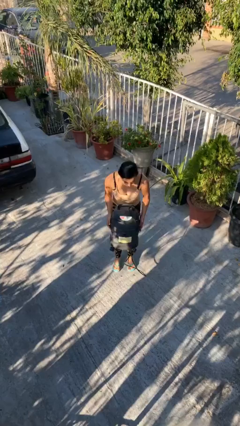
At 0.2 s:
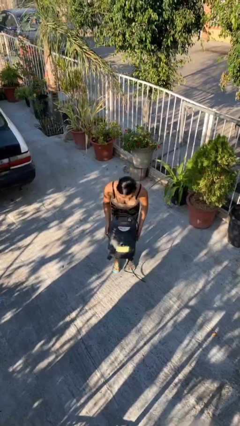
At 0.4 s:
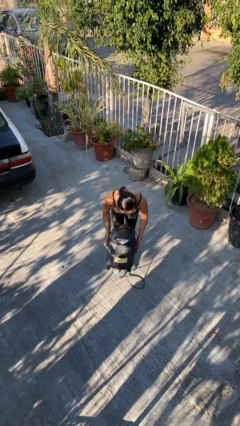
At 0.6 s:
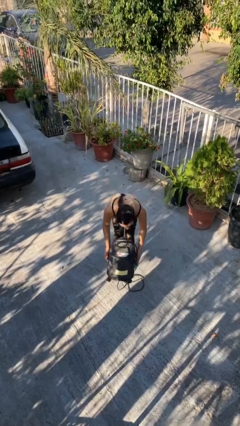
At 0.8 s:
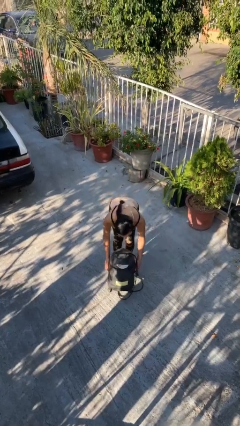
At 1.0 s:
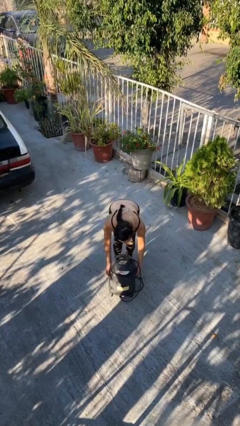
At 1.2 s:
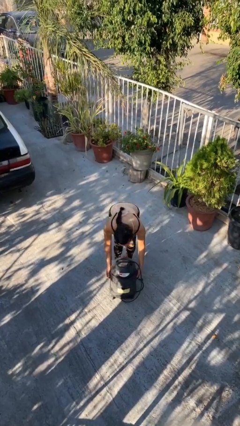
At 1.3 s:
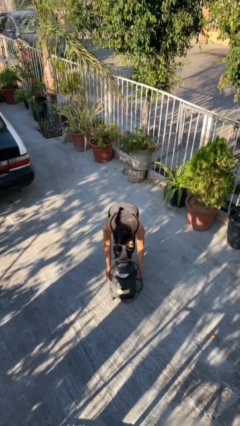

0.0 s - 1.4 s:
person puts down object on floor

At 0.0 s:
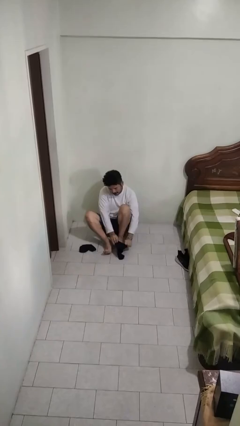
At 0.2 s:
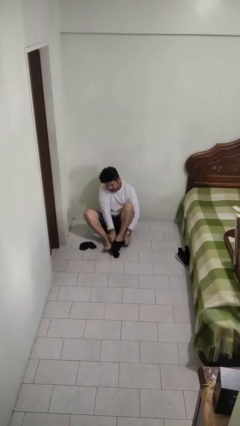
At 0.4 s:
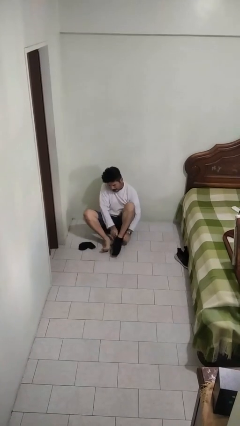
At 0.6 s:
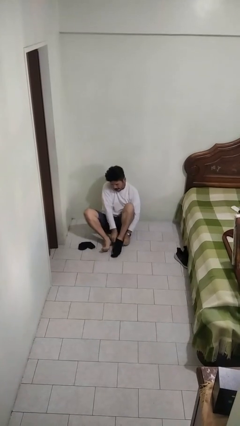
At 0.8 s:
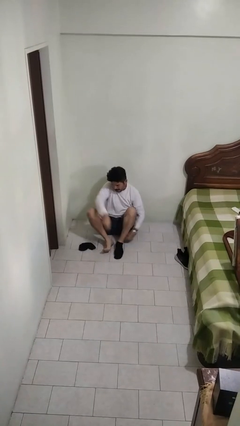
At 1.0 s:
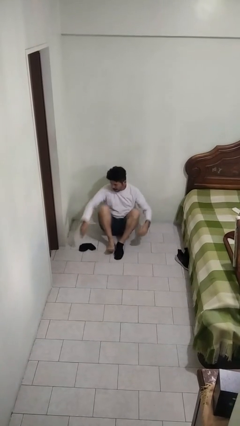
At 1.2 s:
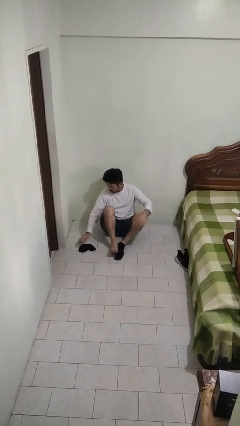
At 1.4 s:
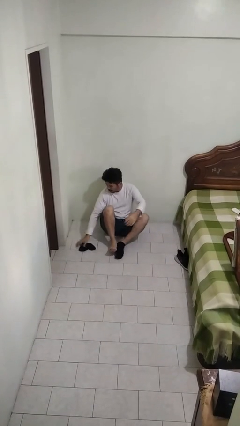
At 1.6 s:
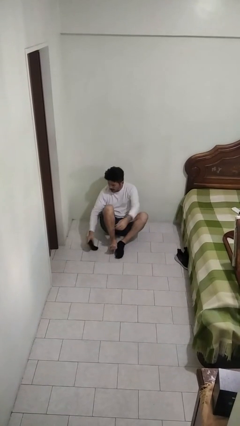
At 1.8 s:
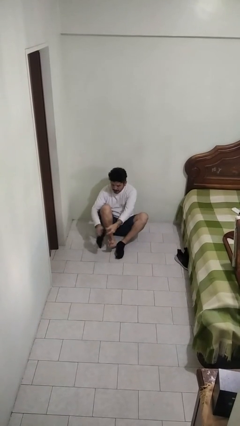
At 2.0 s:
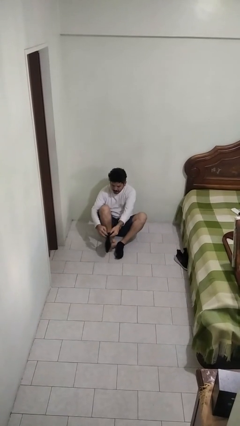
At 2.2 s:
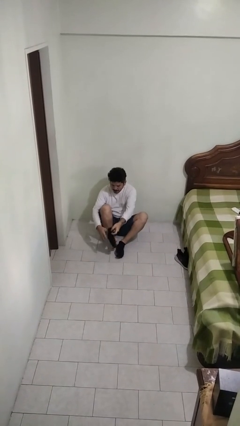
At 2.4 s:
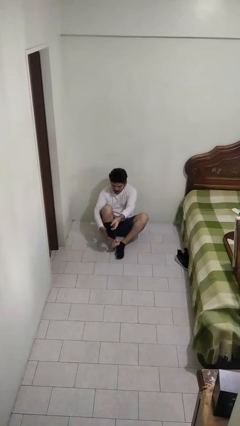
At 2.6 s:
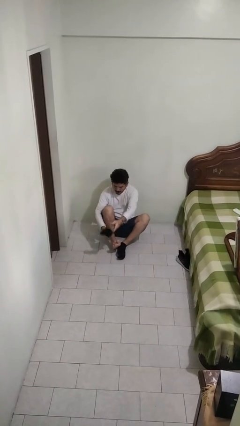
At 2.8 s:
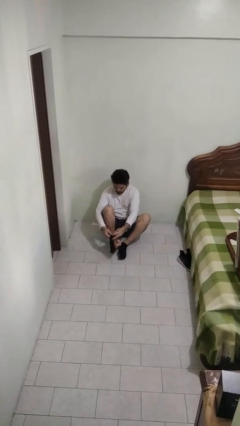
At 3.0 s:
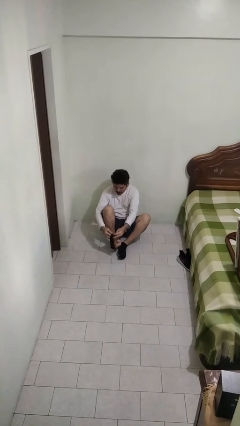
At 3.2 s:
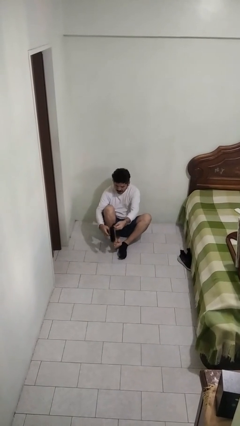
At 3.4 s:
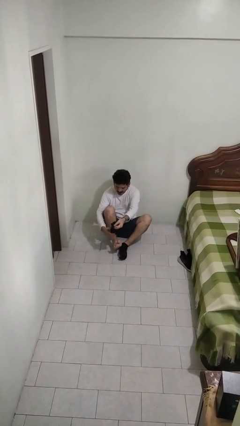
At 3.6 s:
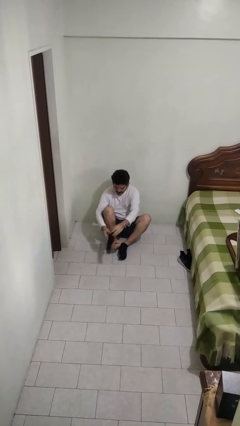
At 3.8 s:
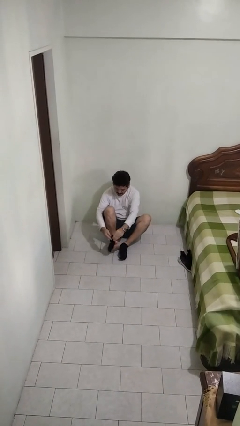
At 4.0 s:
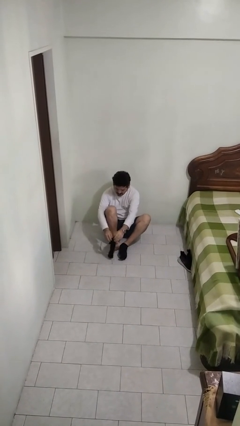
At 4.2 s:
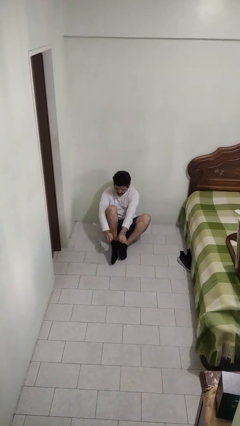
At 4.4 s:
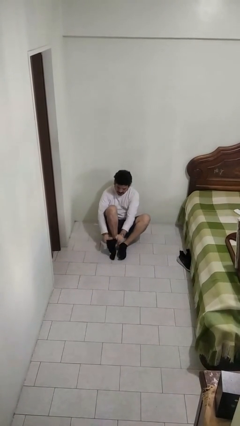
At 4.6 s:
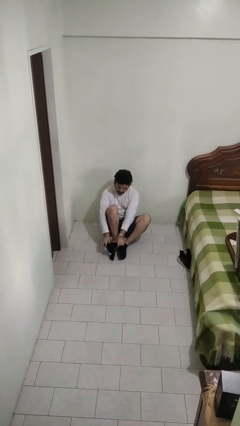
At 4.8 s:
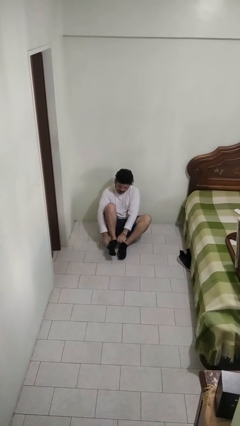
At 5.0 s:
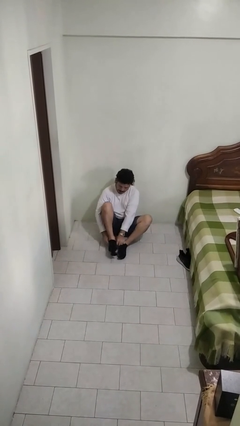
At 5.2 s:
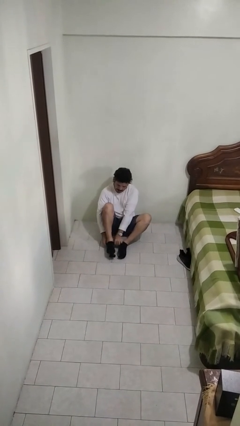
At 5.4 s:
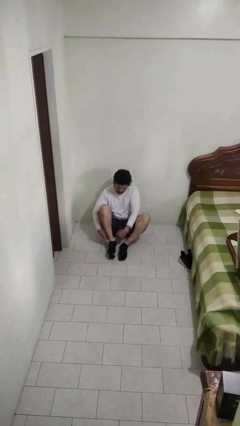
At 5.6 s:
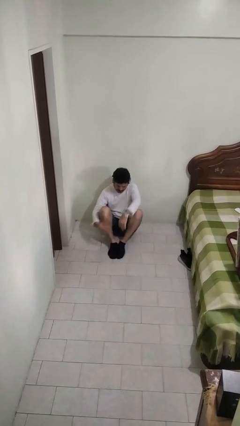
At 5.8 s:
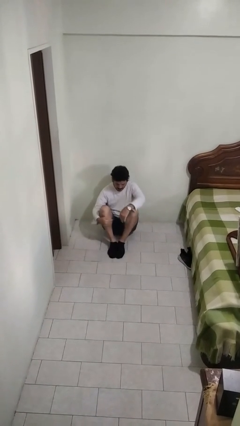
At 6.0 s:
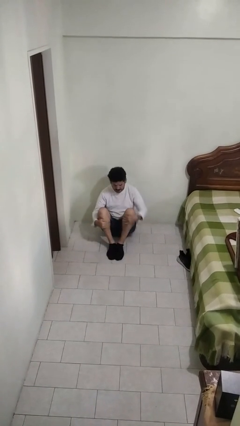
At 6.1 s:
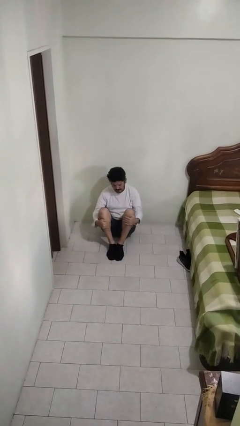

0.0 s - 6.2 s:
person puts on socks

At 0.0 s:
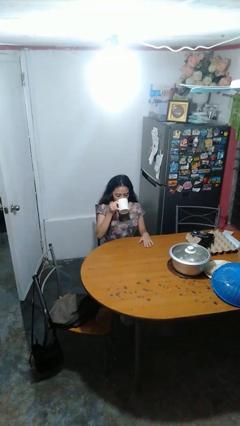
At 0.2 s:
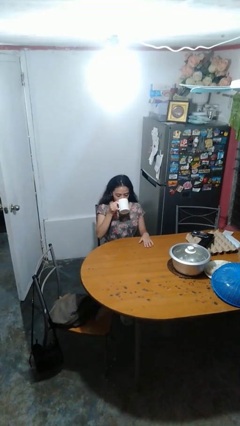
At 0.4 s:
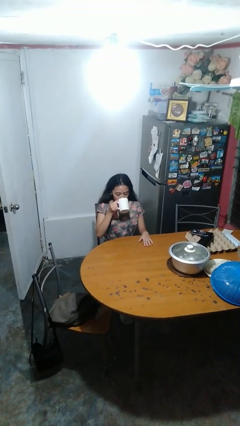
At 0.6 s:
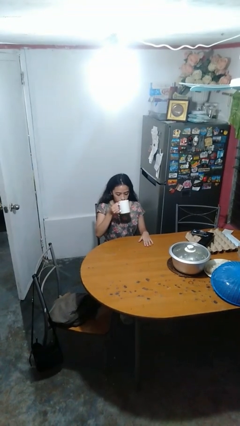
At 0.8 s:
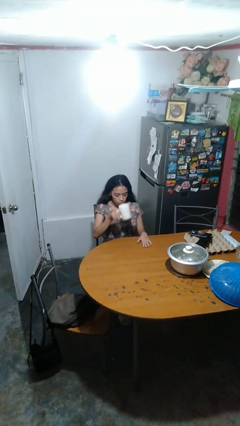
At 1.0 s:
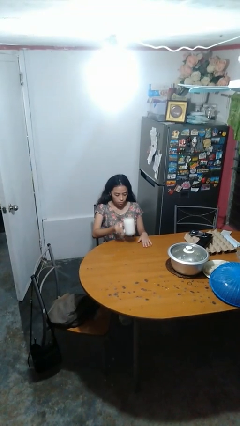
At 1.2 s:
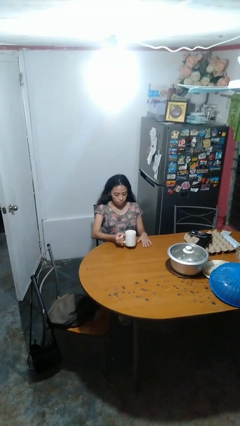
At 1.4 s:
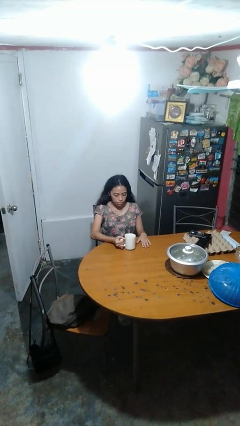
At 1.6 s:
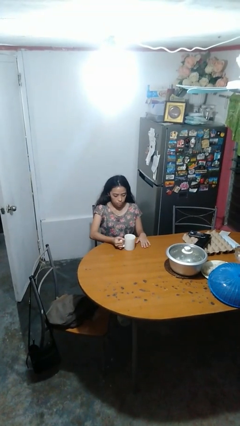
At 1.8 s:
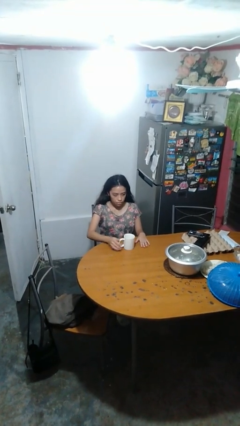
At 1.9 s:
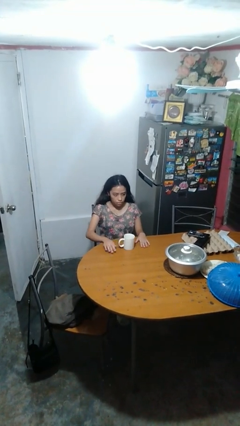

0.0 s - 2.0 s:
person puts down object on table

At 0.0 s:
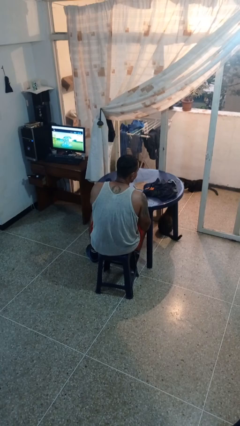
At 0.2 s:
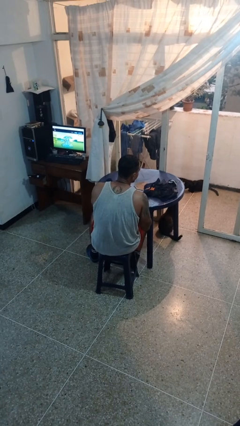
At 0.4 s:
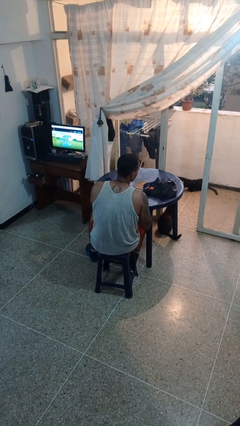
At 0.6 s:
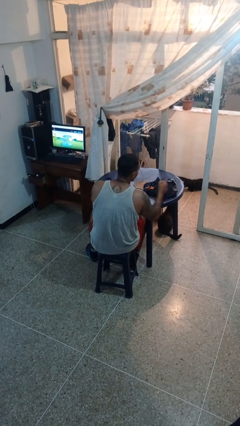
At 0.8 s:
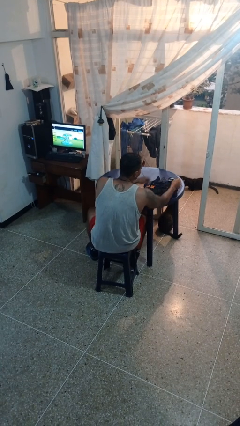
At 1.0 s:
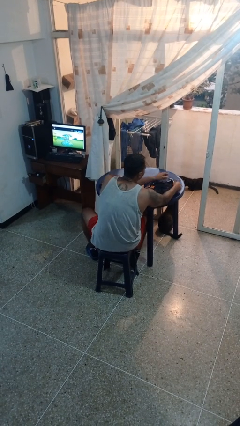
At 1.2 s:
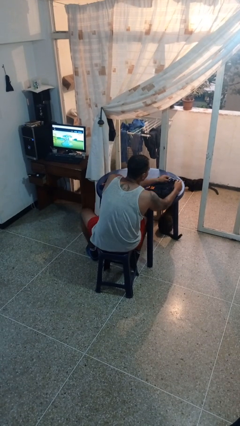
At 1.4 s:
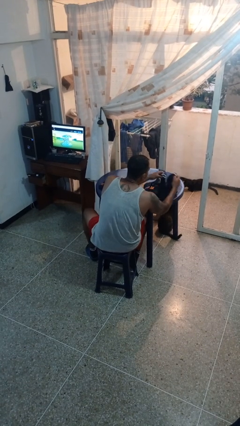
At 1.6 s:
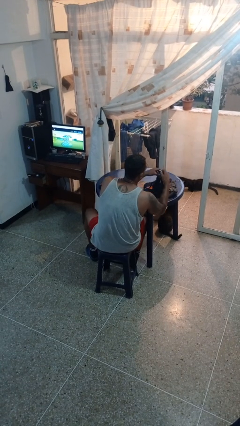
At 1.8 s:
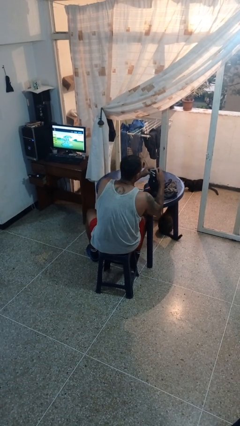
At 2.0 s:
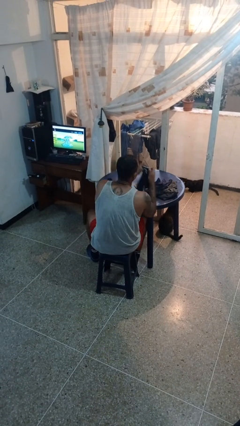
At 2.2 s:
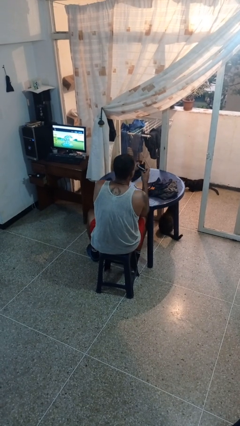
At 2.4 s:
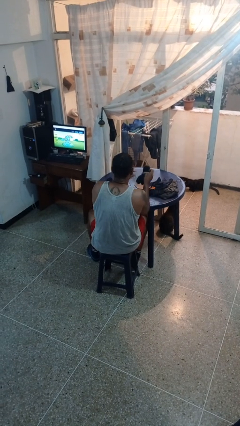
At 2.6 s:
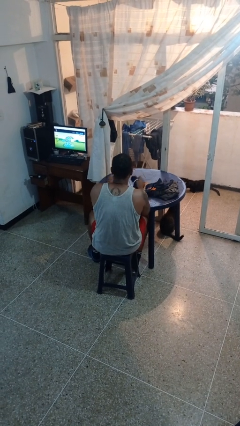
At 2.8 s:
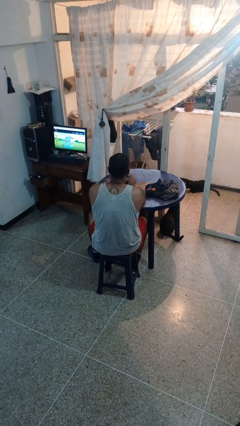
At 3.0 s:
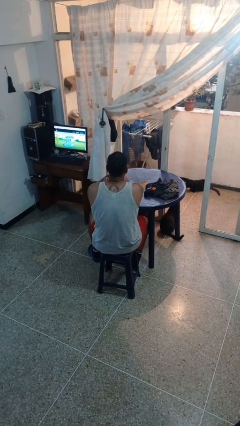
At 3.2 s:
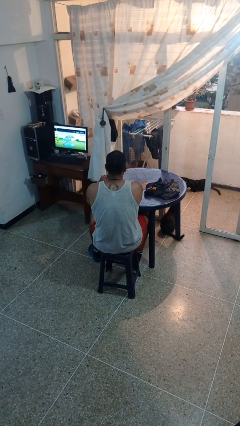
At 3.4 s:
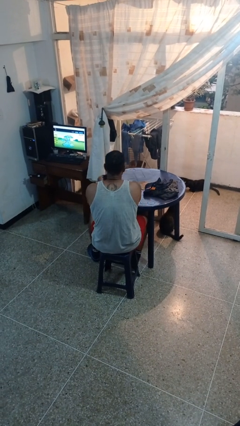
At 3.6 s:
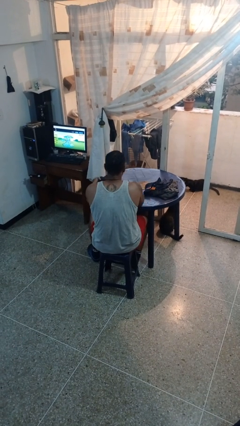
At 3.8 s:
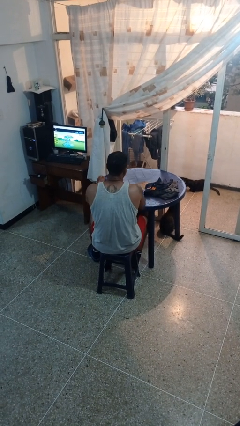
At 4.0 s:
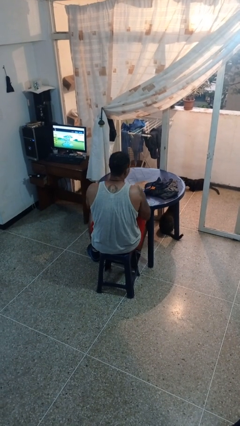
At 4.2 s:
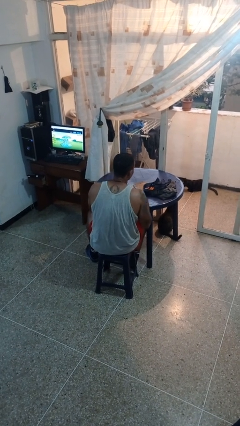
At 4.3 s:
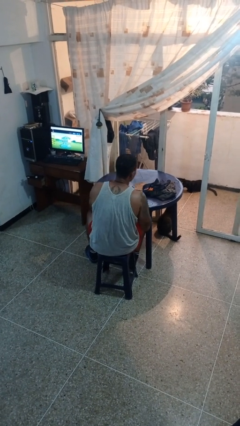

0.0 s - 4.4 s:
person folds socks

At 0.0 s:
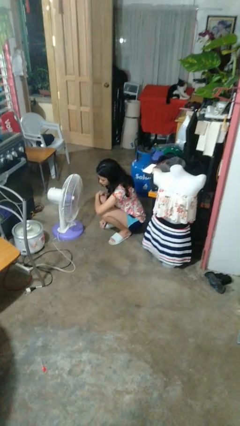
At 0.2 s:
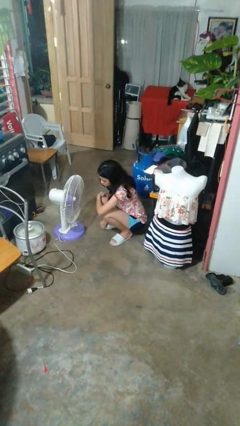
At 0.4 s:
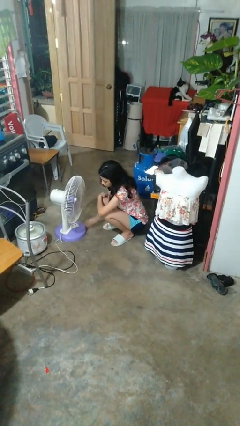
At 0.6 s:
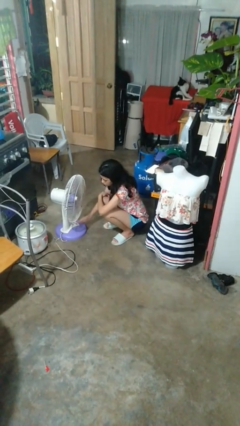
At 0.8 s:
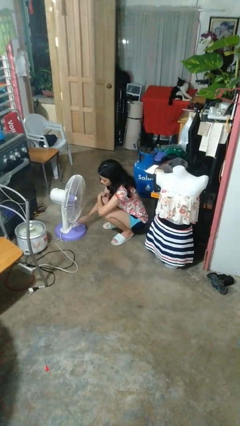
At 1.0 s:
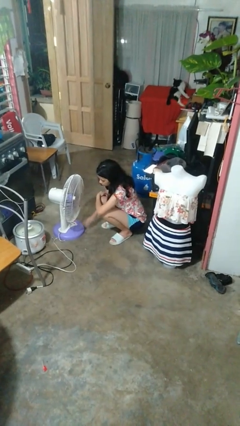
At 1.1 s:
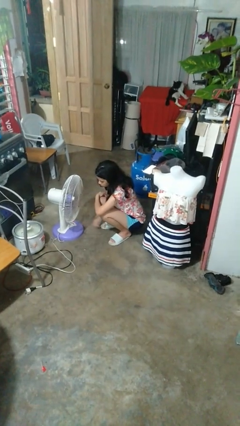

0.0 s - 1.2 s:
person turns off fan

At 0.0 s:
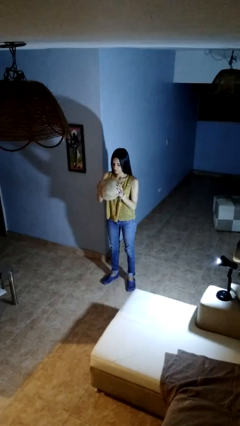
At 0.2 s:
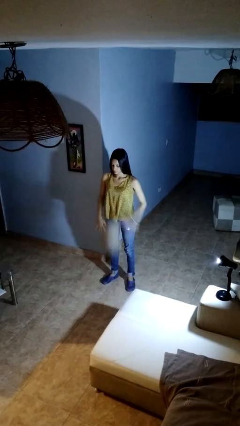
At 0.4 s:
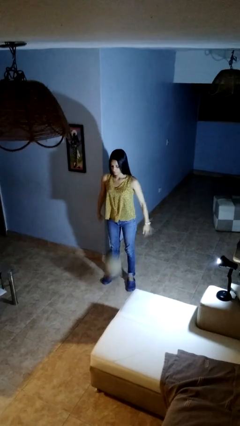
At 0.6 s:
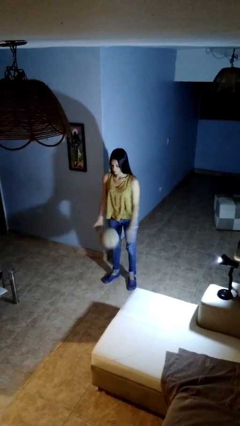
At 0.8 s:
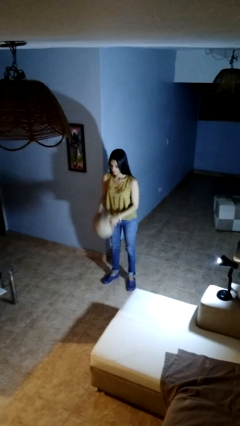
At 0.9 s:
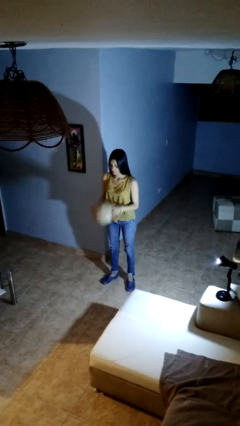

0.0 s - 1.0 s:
person bounces ball on floor

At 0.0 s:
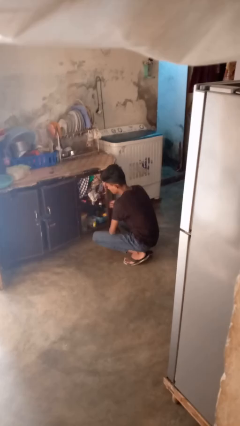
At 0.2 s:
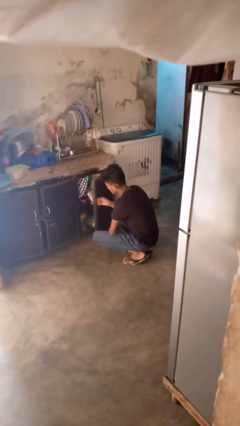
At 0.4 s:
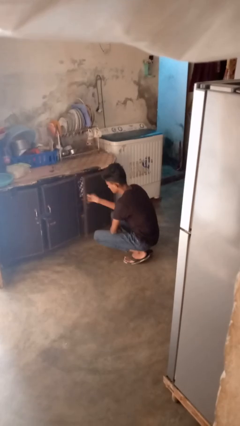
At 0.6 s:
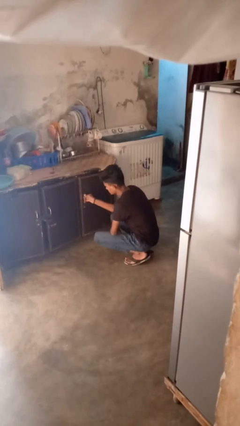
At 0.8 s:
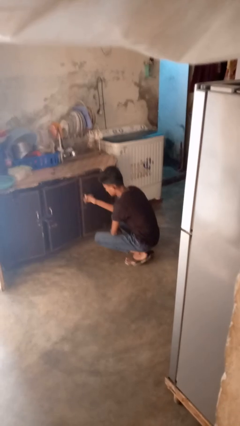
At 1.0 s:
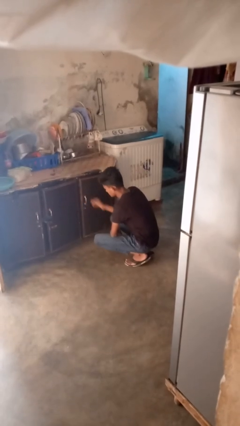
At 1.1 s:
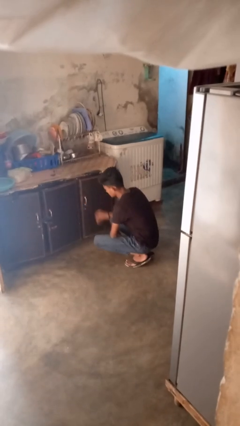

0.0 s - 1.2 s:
person closes cabinet

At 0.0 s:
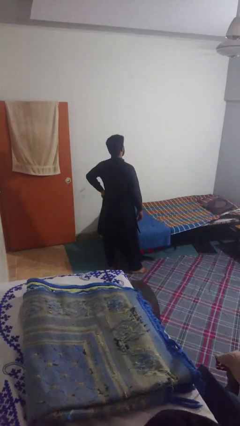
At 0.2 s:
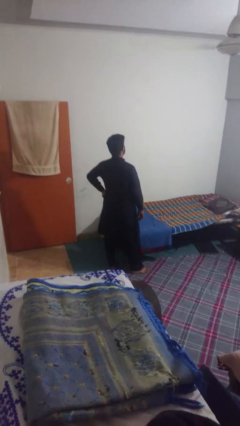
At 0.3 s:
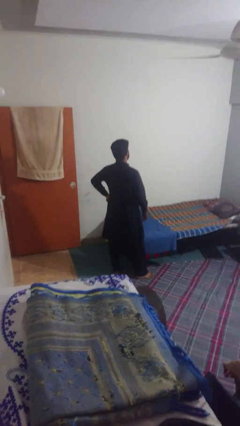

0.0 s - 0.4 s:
person strokes chin
